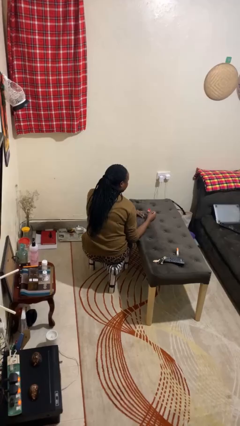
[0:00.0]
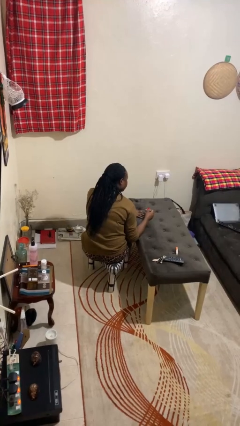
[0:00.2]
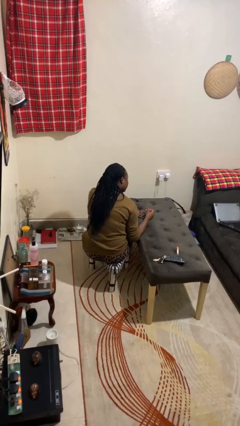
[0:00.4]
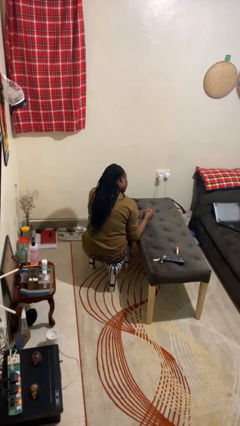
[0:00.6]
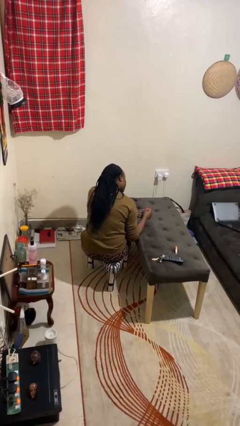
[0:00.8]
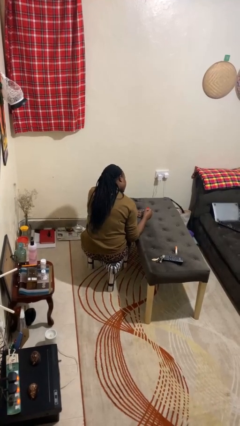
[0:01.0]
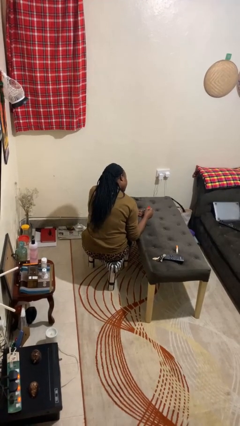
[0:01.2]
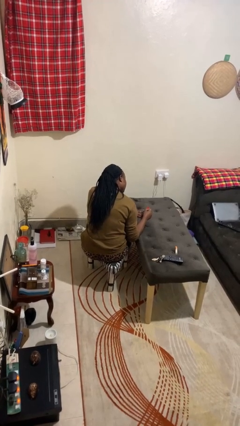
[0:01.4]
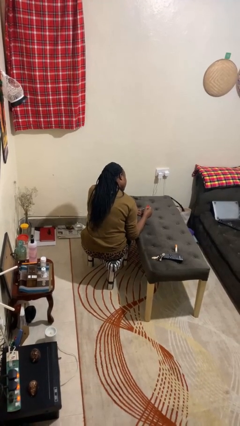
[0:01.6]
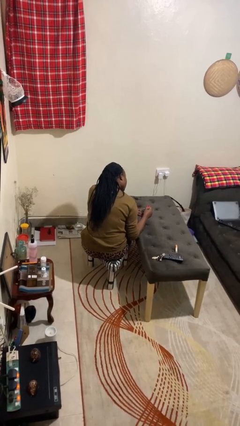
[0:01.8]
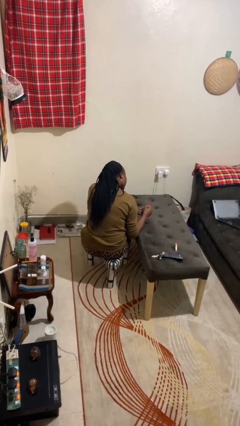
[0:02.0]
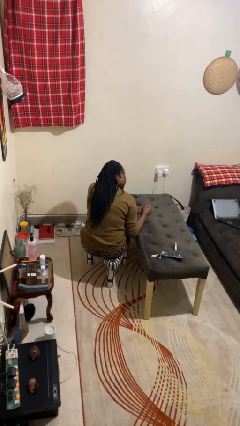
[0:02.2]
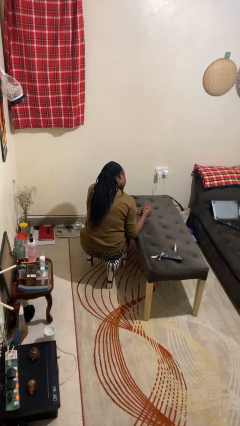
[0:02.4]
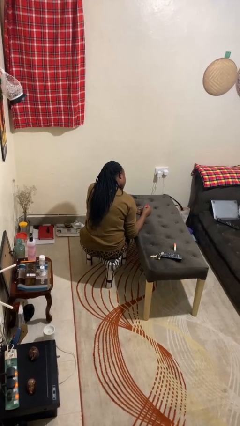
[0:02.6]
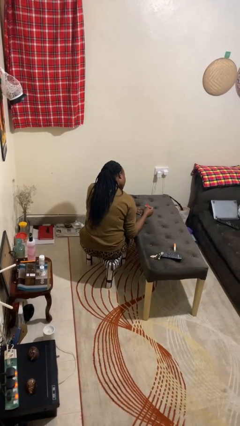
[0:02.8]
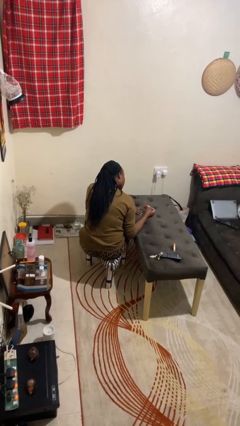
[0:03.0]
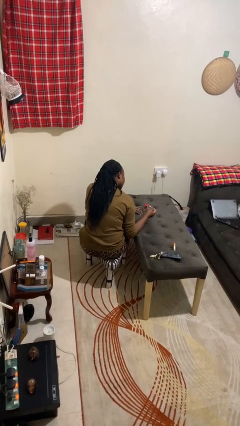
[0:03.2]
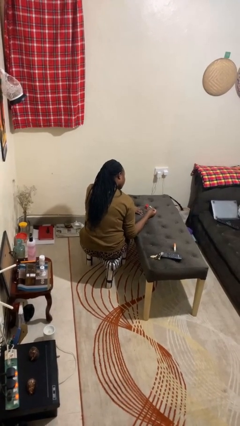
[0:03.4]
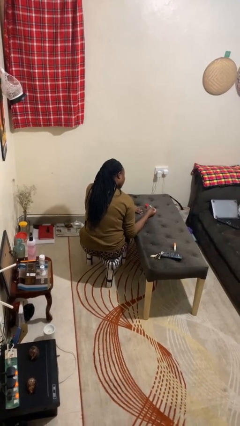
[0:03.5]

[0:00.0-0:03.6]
person paints fingernails

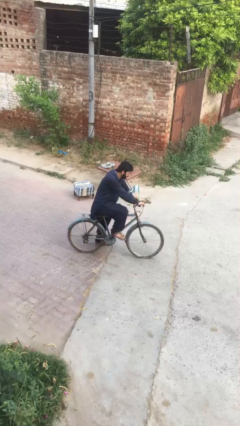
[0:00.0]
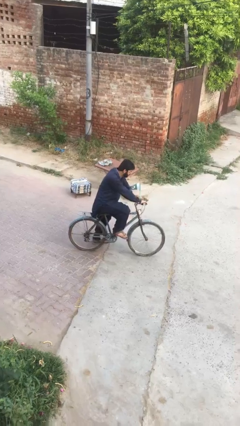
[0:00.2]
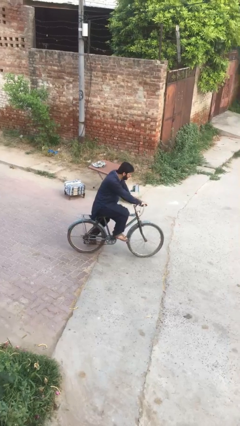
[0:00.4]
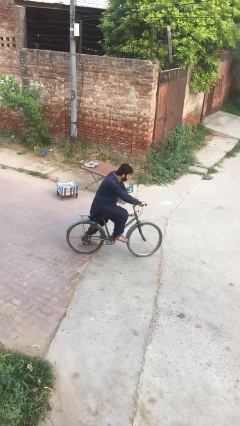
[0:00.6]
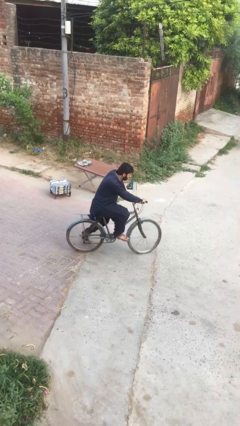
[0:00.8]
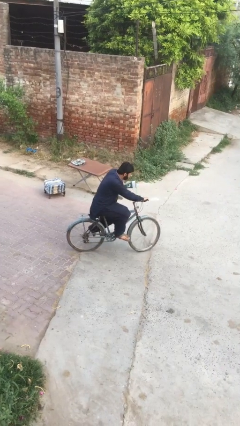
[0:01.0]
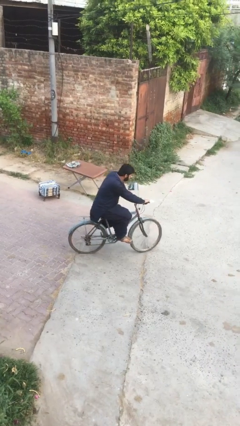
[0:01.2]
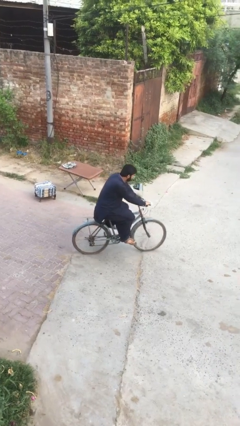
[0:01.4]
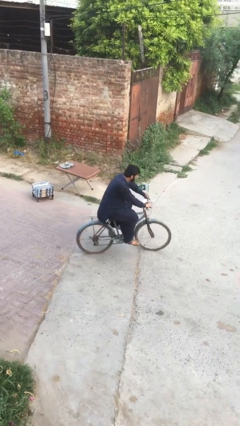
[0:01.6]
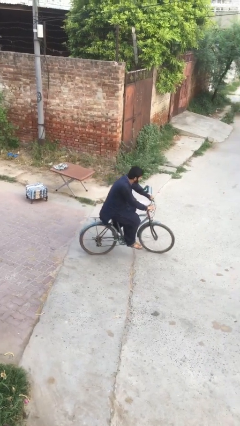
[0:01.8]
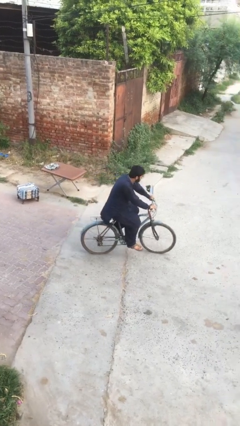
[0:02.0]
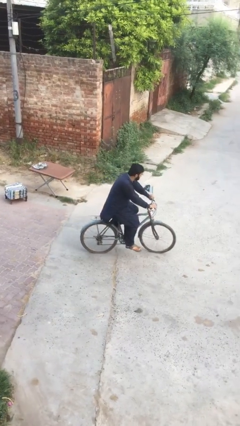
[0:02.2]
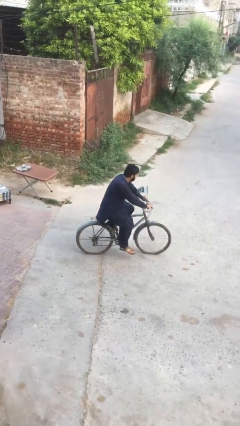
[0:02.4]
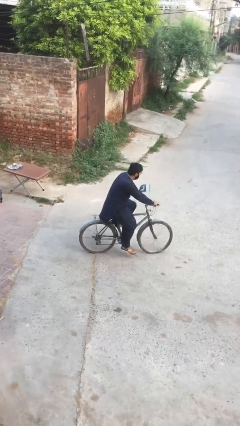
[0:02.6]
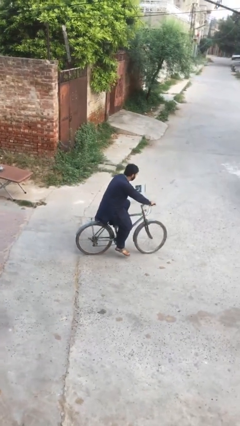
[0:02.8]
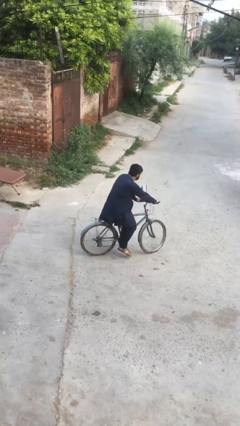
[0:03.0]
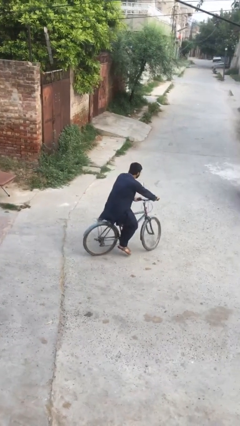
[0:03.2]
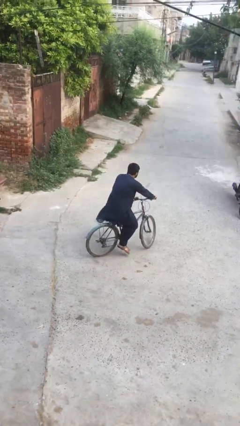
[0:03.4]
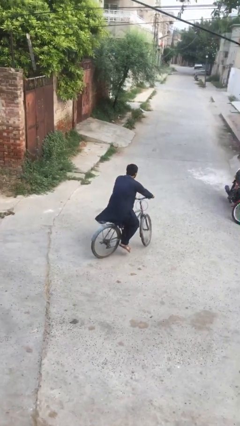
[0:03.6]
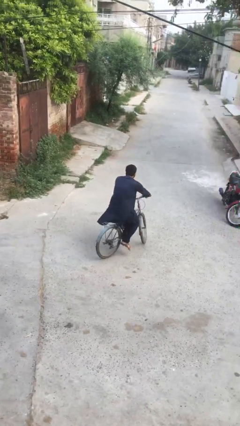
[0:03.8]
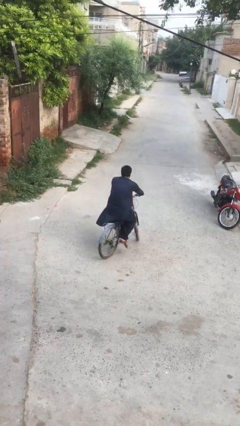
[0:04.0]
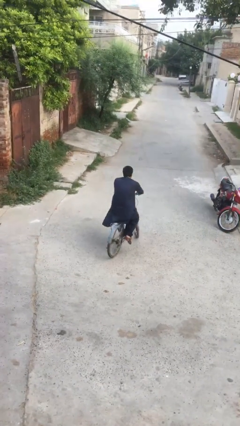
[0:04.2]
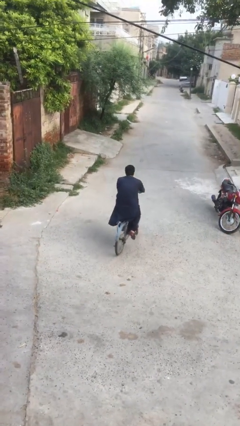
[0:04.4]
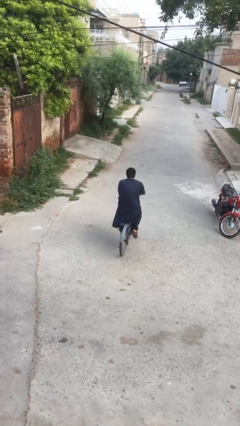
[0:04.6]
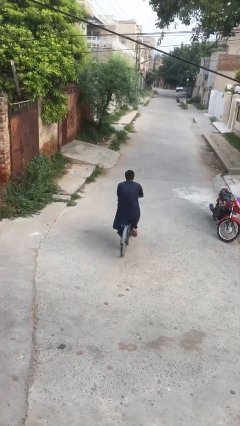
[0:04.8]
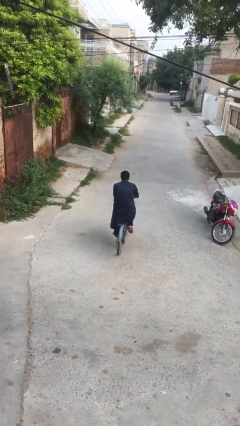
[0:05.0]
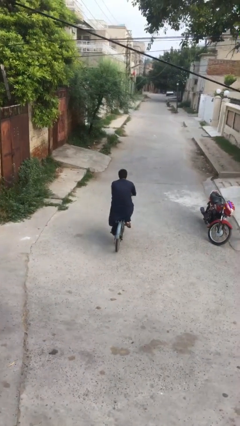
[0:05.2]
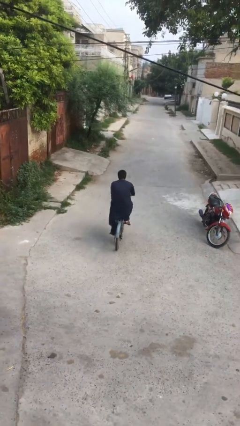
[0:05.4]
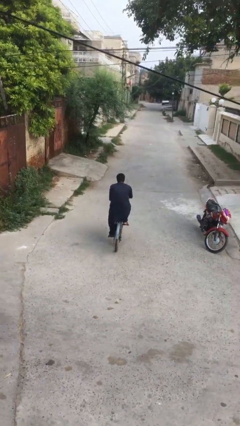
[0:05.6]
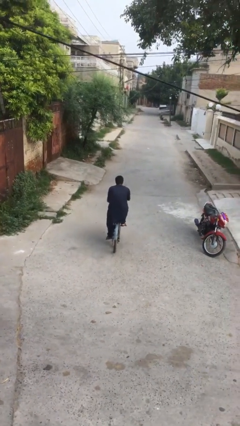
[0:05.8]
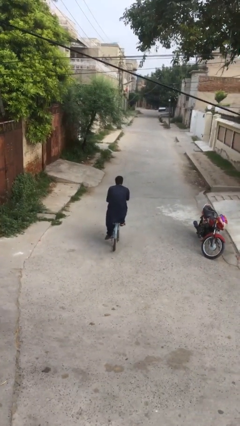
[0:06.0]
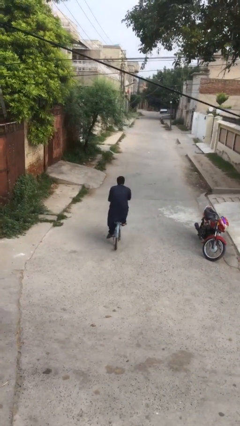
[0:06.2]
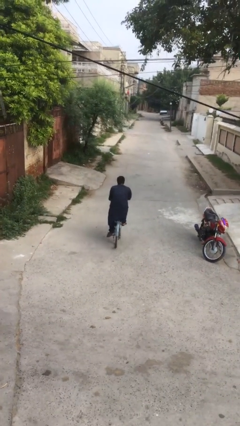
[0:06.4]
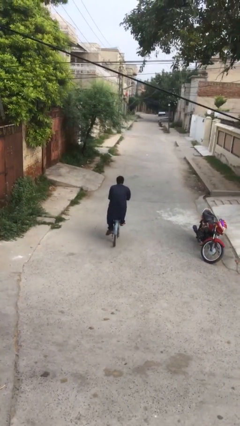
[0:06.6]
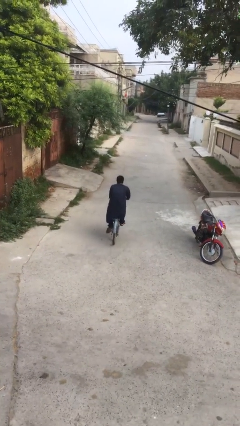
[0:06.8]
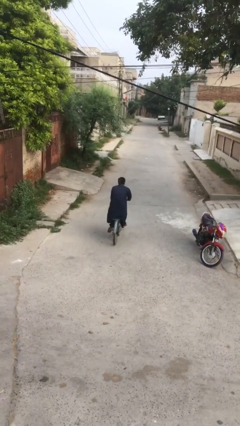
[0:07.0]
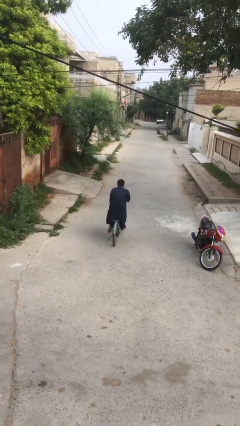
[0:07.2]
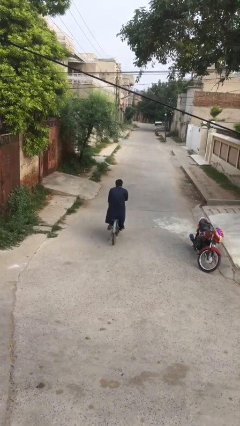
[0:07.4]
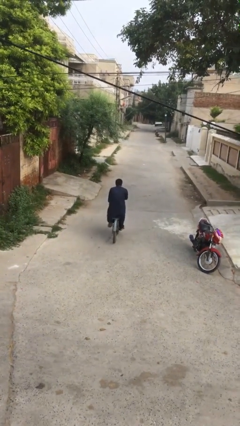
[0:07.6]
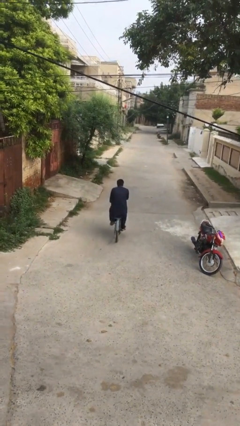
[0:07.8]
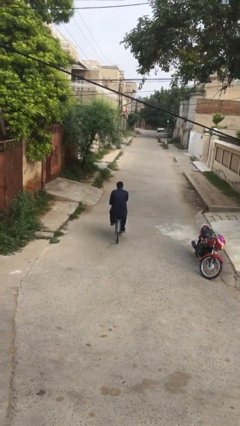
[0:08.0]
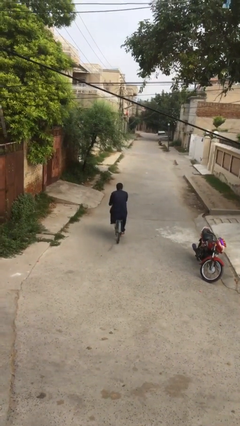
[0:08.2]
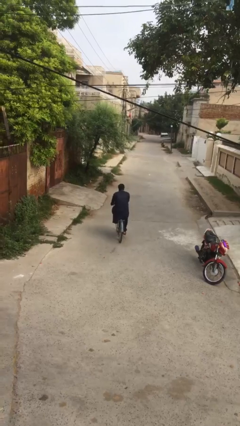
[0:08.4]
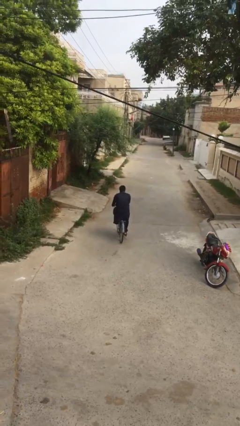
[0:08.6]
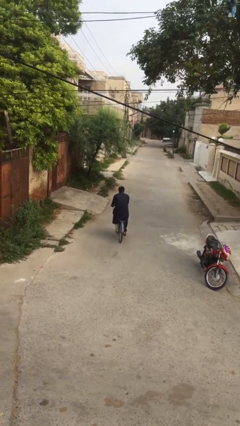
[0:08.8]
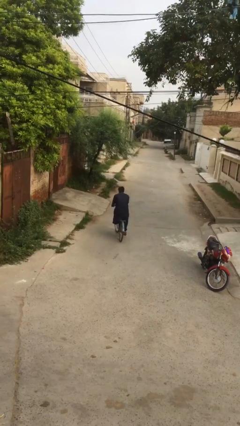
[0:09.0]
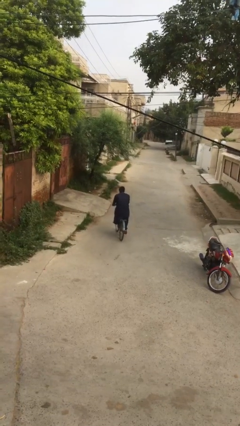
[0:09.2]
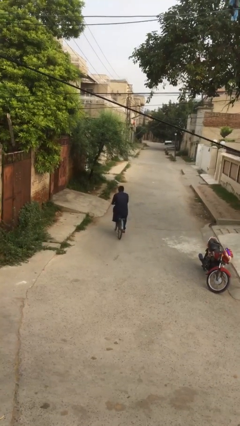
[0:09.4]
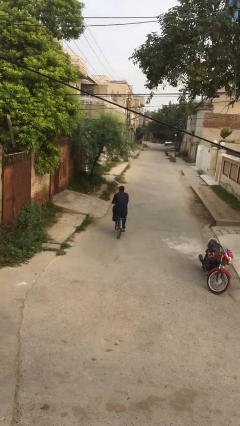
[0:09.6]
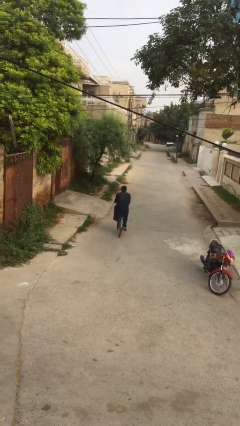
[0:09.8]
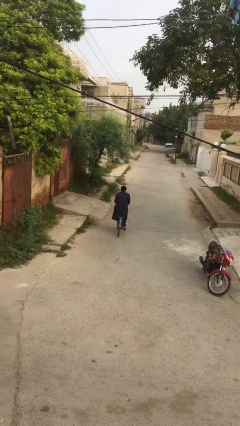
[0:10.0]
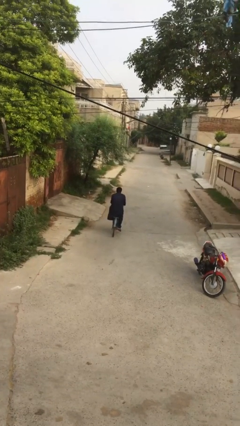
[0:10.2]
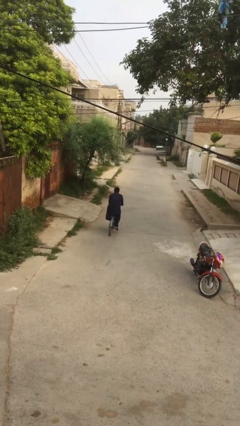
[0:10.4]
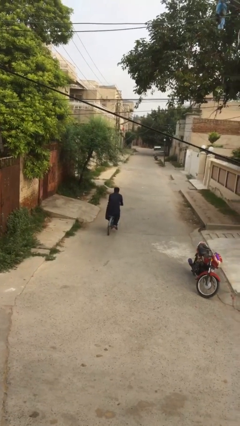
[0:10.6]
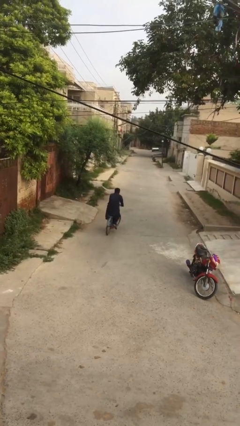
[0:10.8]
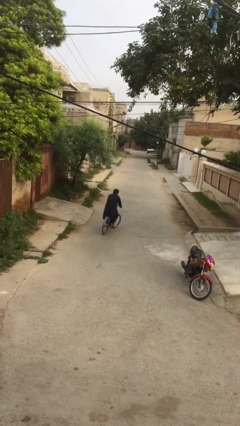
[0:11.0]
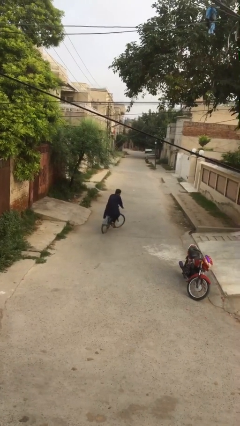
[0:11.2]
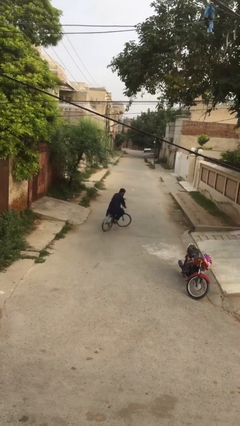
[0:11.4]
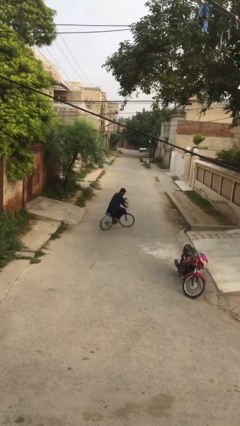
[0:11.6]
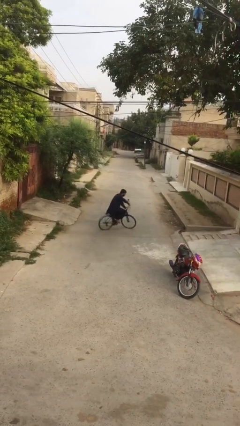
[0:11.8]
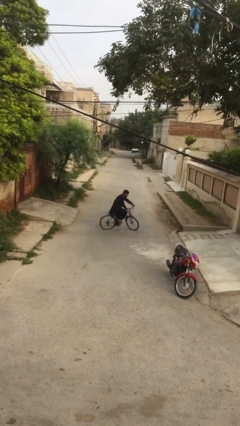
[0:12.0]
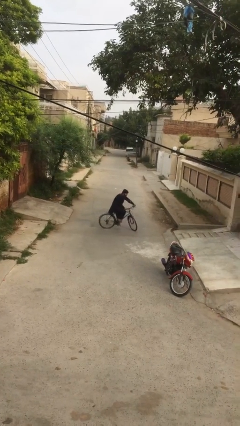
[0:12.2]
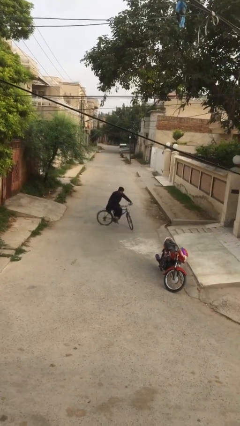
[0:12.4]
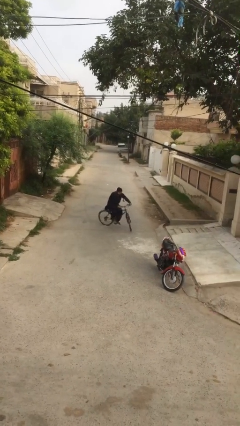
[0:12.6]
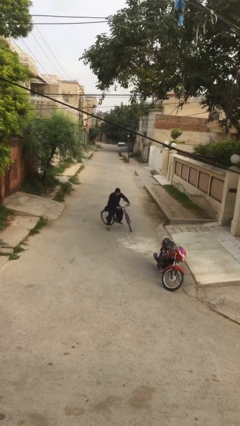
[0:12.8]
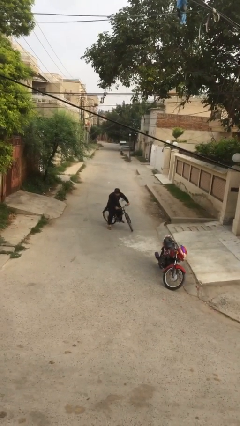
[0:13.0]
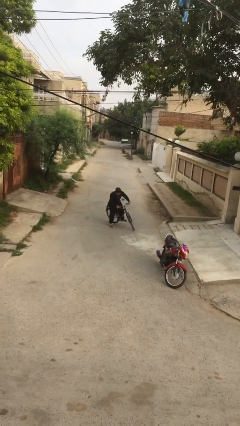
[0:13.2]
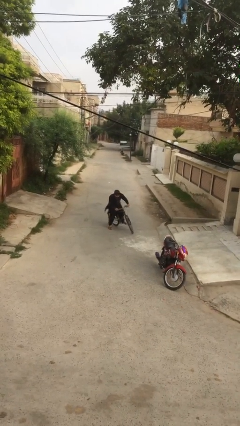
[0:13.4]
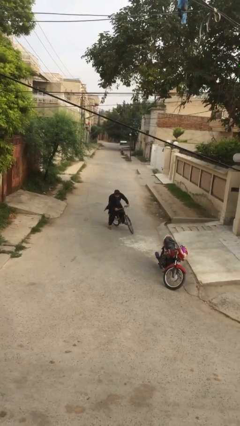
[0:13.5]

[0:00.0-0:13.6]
person rides bicycle

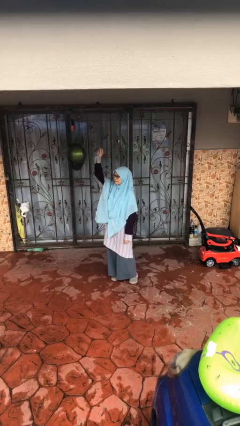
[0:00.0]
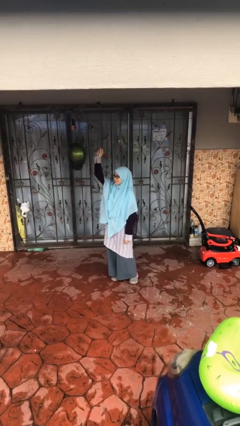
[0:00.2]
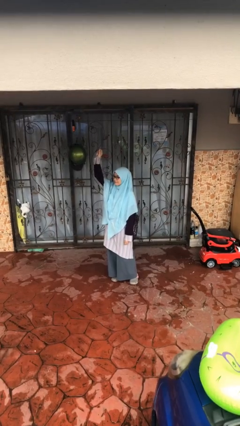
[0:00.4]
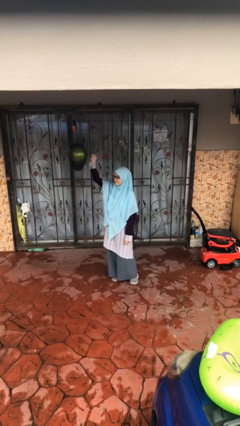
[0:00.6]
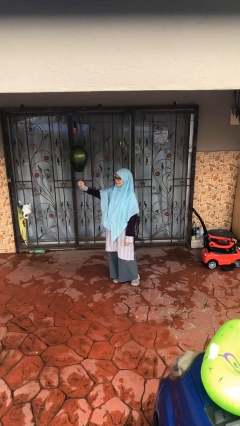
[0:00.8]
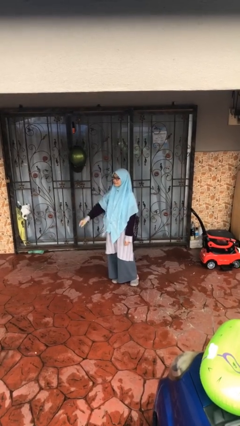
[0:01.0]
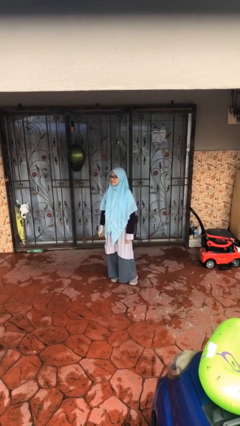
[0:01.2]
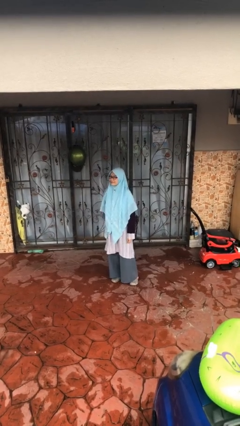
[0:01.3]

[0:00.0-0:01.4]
person gestures lower hand
